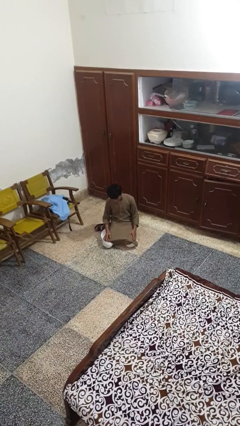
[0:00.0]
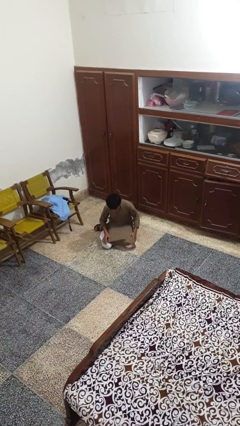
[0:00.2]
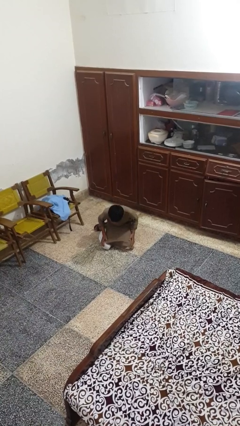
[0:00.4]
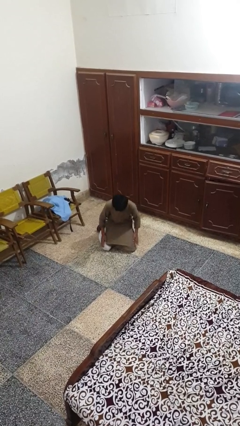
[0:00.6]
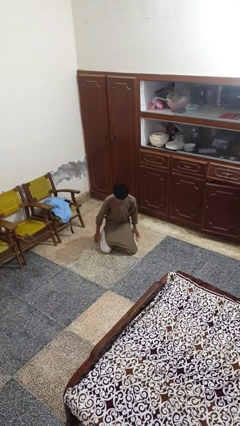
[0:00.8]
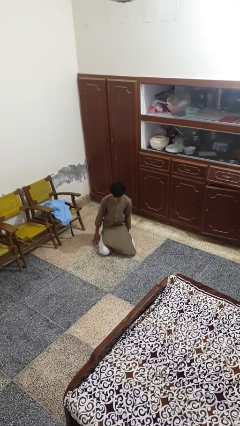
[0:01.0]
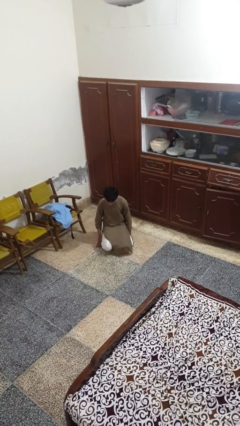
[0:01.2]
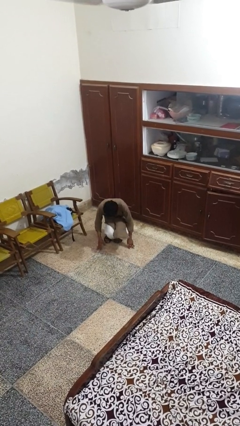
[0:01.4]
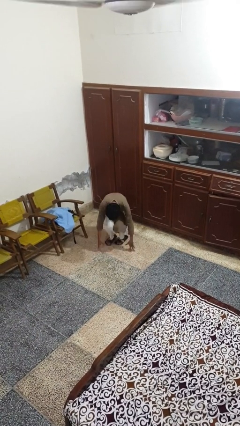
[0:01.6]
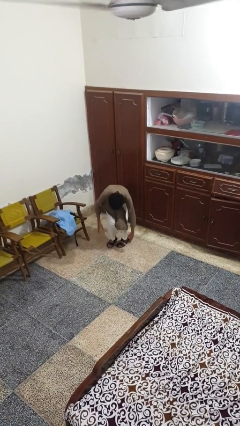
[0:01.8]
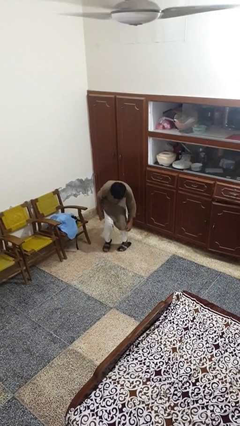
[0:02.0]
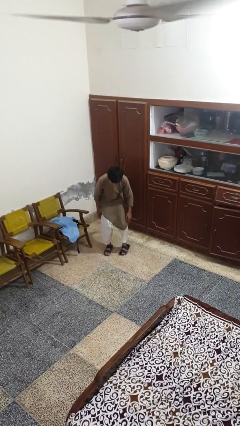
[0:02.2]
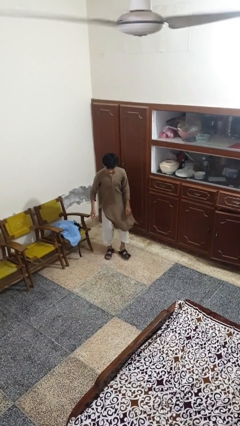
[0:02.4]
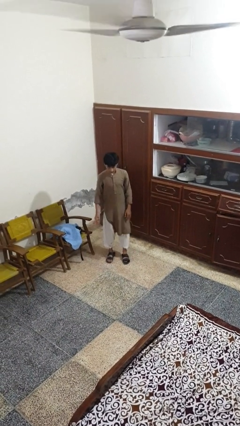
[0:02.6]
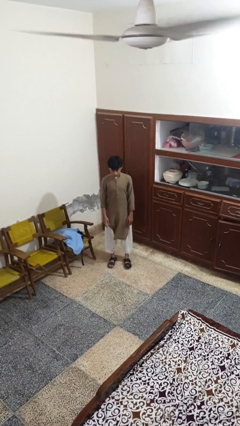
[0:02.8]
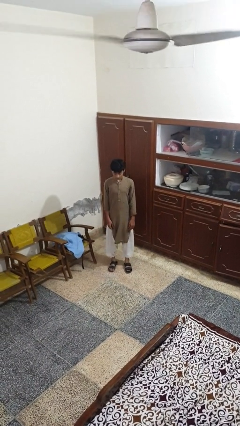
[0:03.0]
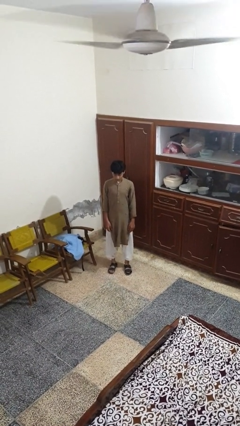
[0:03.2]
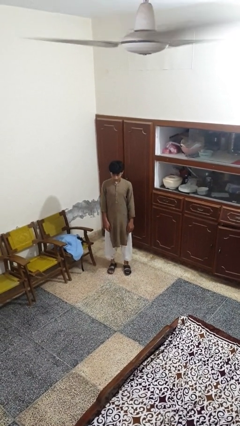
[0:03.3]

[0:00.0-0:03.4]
person stands up from floor

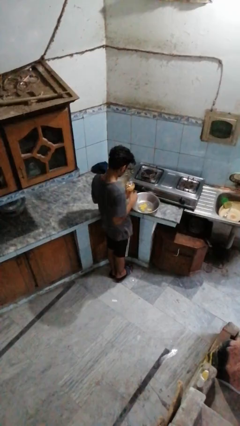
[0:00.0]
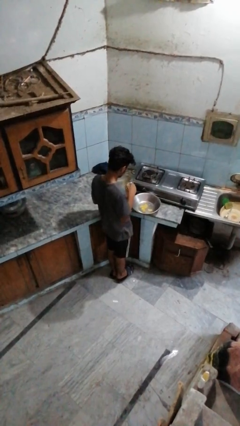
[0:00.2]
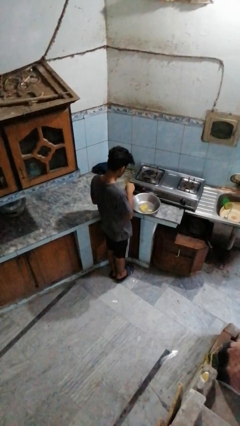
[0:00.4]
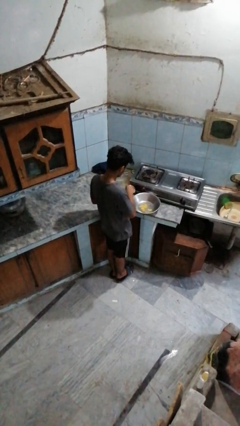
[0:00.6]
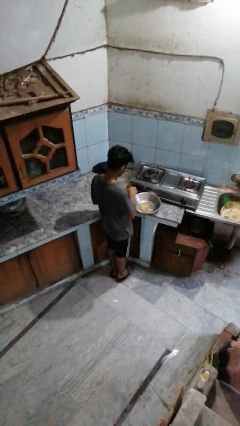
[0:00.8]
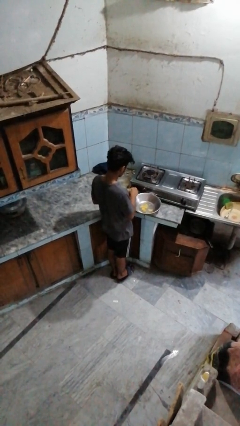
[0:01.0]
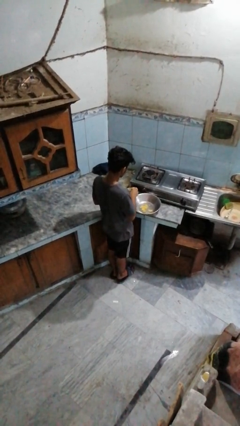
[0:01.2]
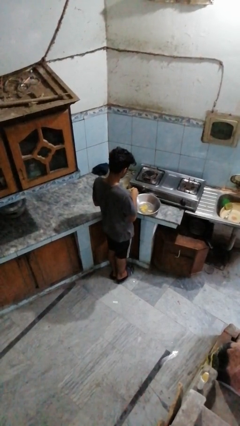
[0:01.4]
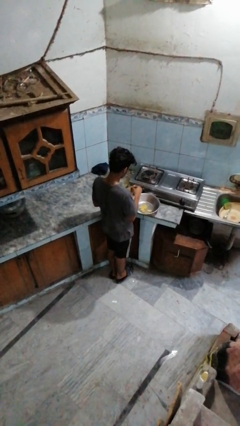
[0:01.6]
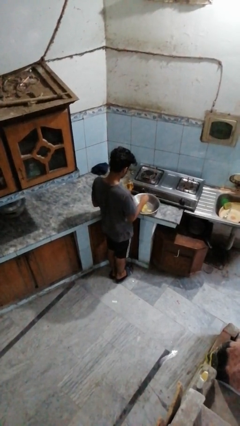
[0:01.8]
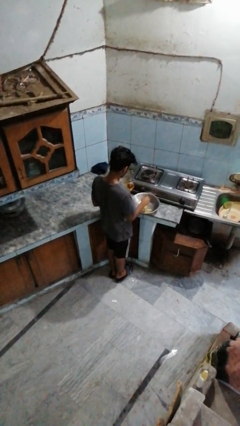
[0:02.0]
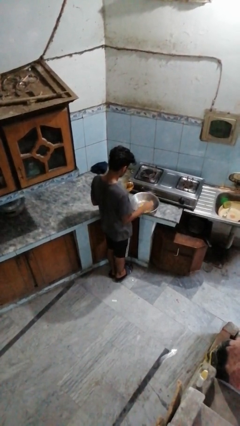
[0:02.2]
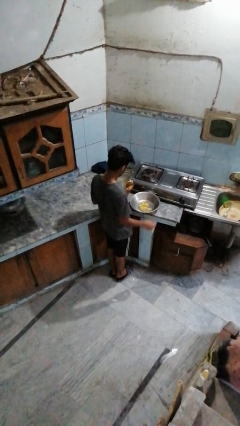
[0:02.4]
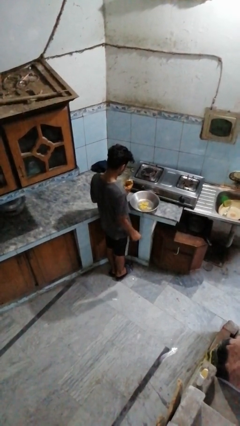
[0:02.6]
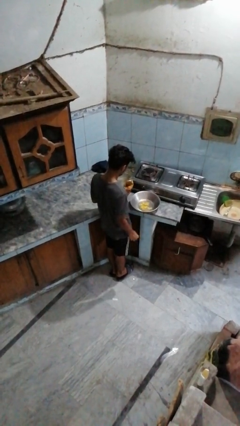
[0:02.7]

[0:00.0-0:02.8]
person pours into bowl

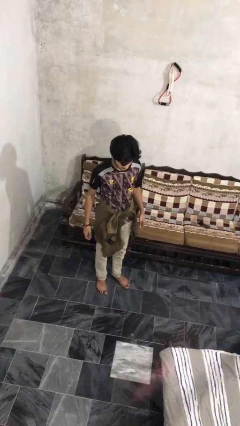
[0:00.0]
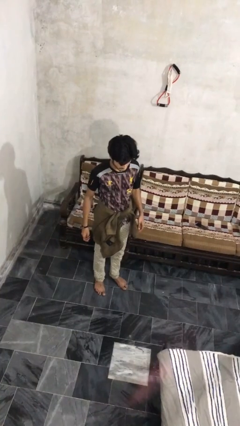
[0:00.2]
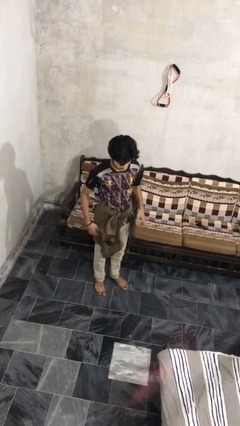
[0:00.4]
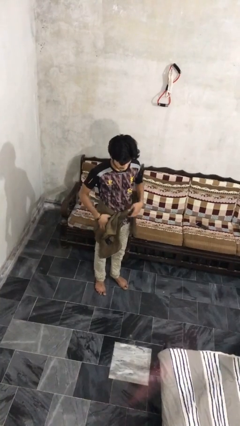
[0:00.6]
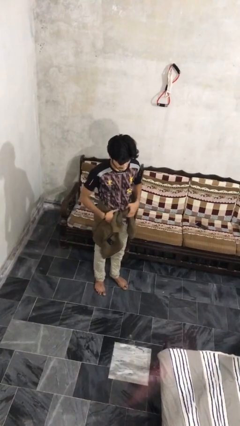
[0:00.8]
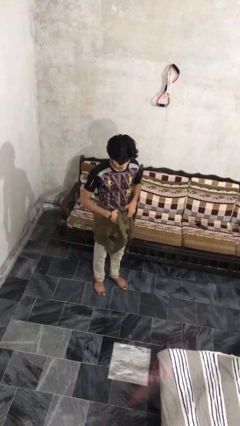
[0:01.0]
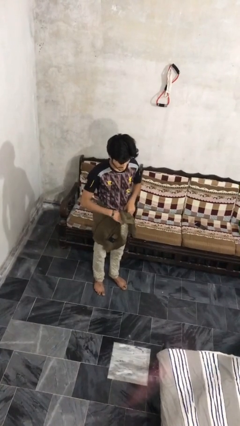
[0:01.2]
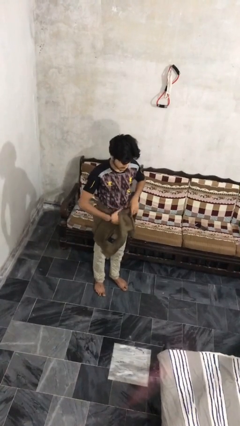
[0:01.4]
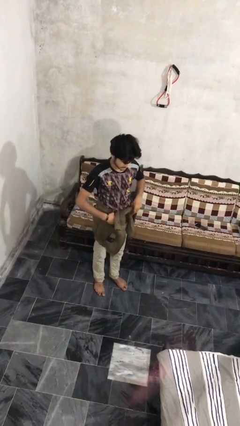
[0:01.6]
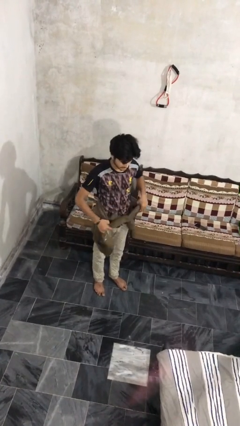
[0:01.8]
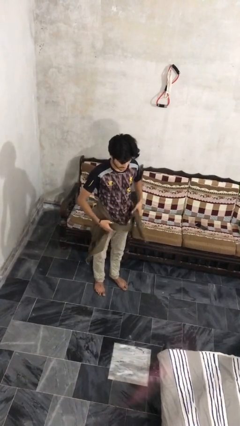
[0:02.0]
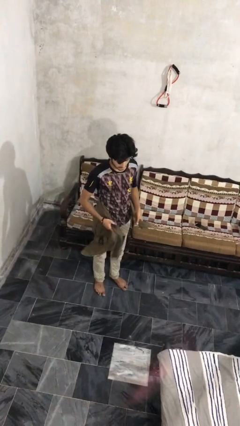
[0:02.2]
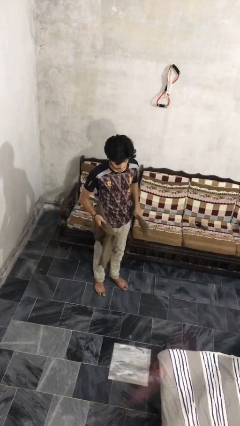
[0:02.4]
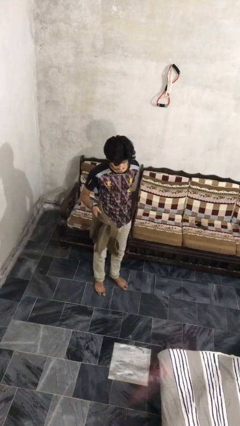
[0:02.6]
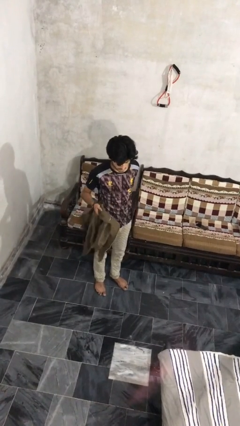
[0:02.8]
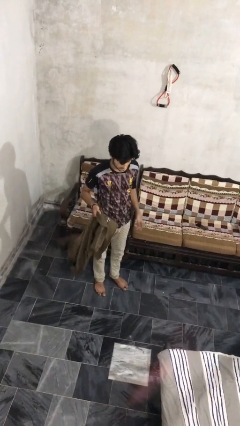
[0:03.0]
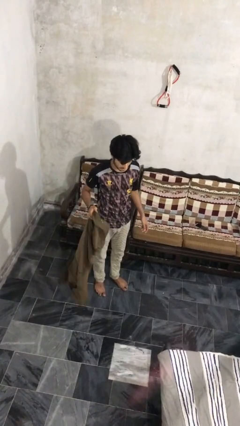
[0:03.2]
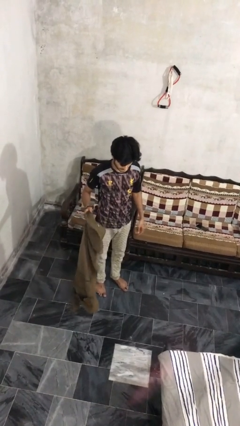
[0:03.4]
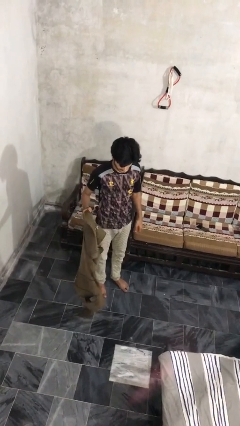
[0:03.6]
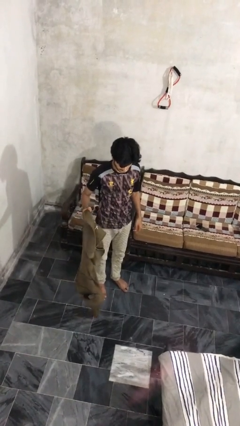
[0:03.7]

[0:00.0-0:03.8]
person unties jacket around waist

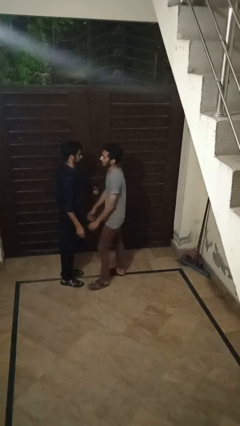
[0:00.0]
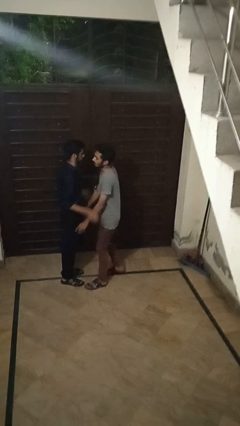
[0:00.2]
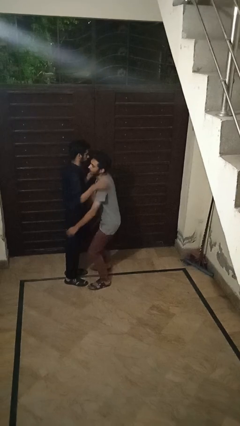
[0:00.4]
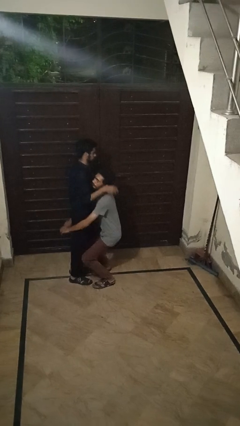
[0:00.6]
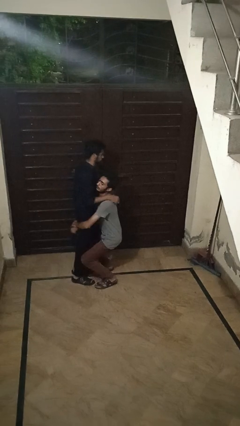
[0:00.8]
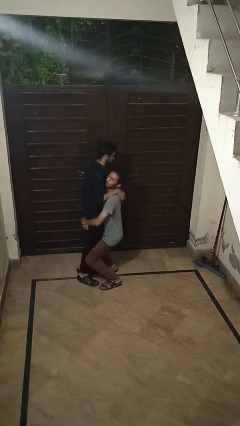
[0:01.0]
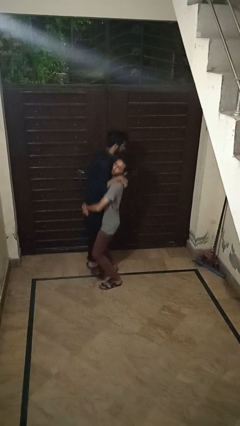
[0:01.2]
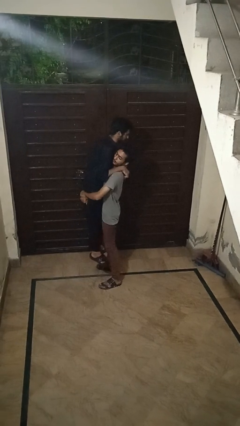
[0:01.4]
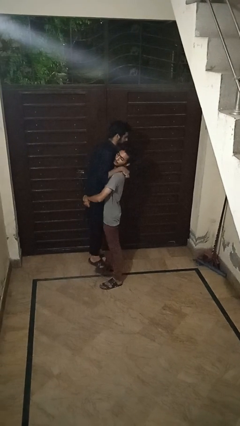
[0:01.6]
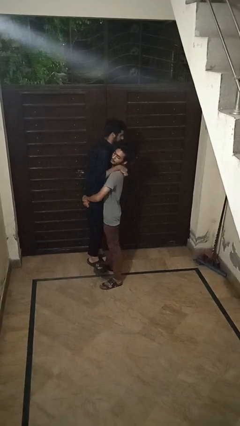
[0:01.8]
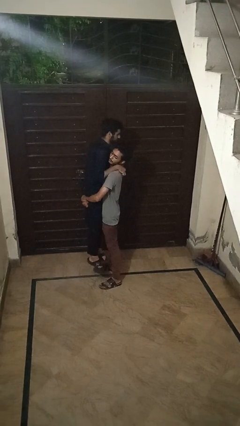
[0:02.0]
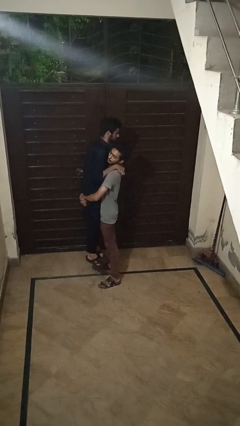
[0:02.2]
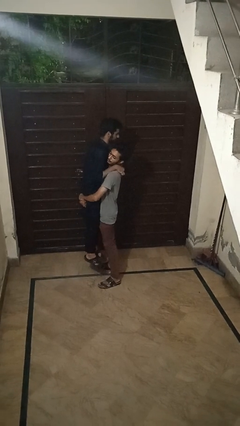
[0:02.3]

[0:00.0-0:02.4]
person picks up person

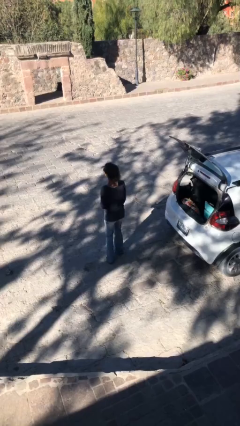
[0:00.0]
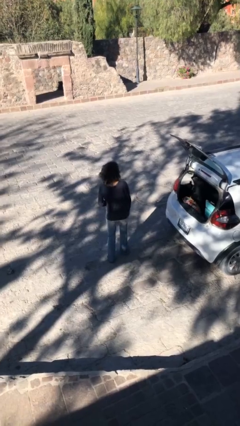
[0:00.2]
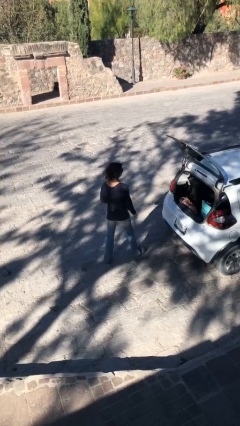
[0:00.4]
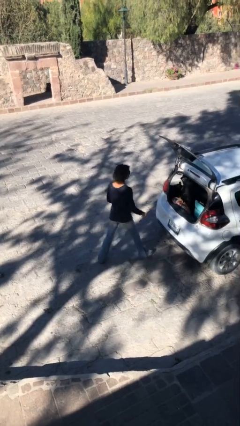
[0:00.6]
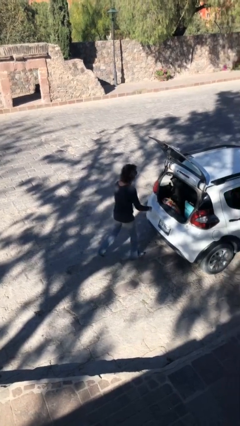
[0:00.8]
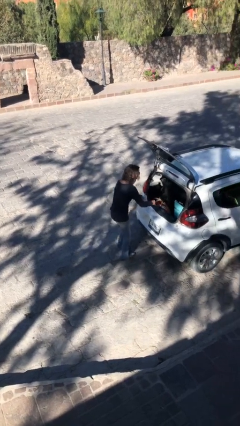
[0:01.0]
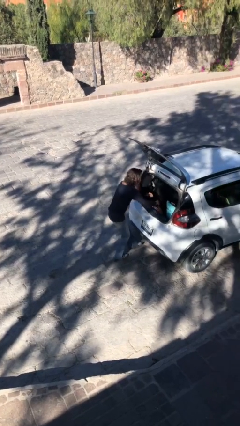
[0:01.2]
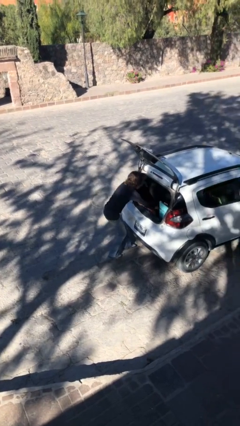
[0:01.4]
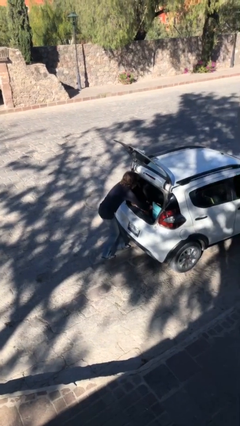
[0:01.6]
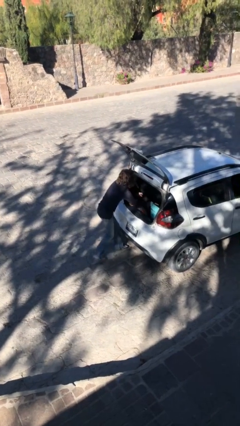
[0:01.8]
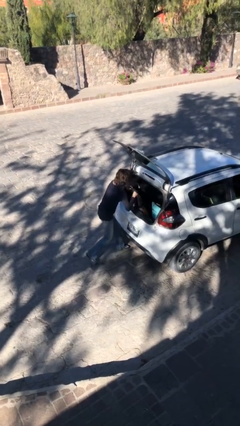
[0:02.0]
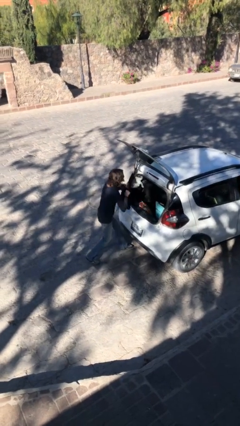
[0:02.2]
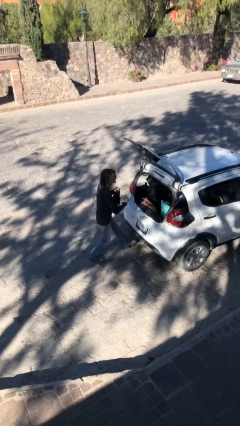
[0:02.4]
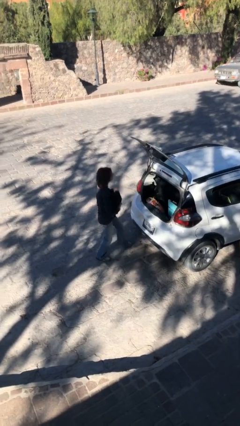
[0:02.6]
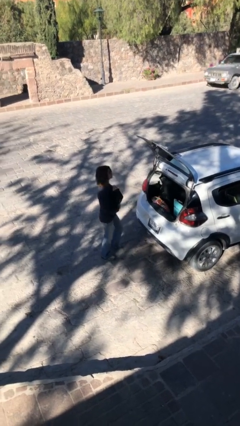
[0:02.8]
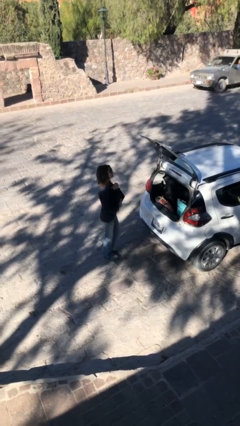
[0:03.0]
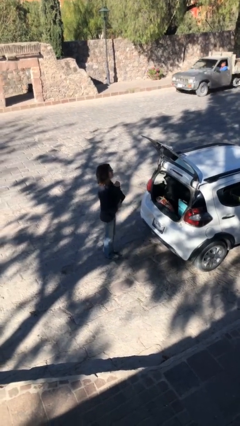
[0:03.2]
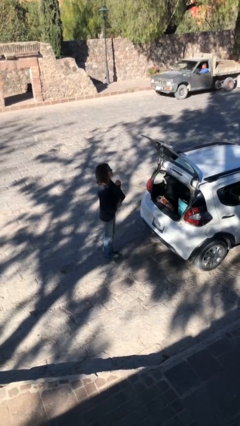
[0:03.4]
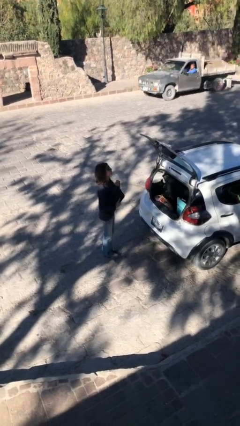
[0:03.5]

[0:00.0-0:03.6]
person unloads car

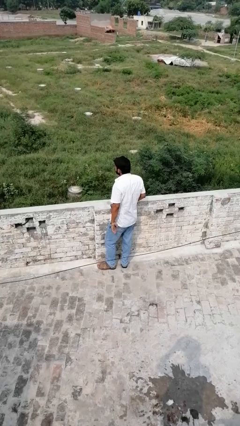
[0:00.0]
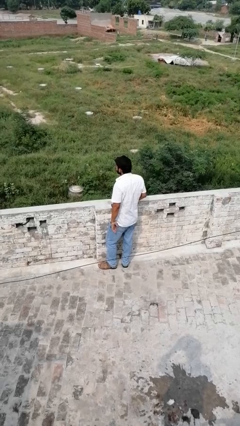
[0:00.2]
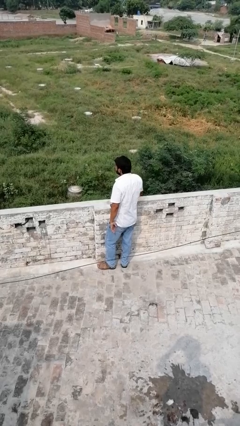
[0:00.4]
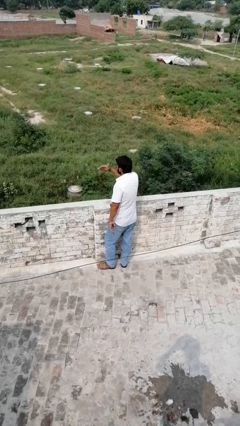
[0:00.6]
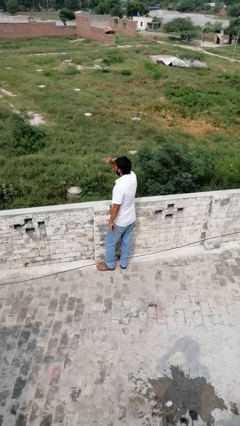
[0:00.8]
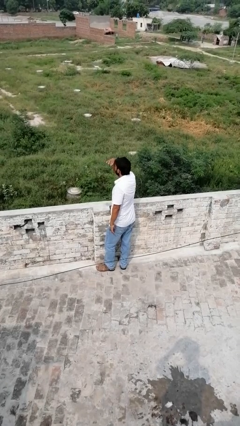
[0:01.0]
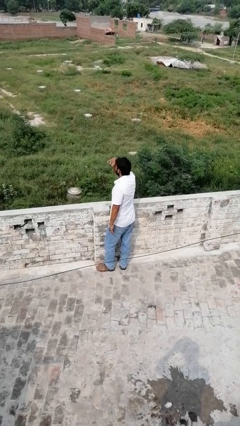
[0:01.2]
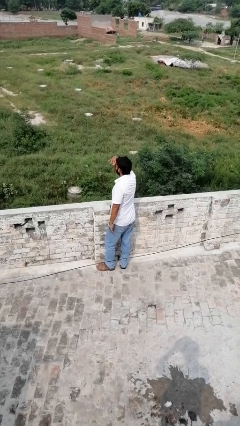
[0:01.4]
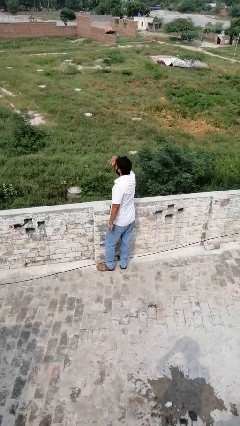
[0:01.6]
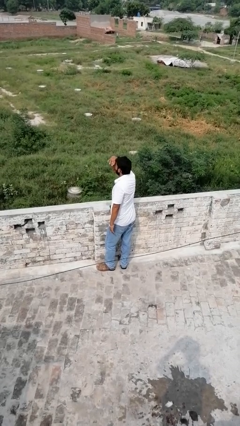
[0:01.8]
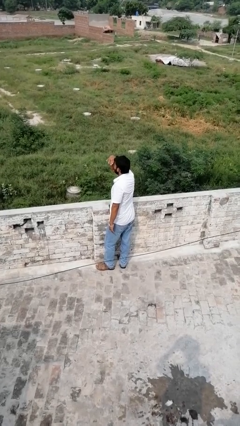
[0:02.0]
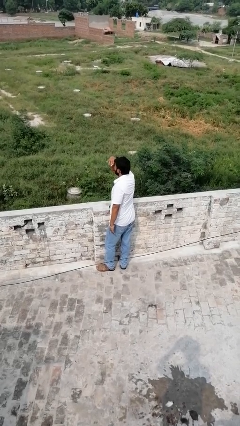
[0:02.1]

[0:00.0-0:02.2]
person shades eyes
